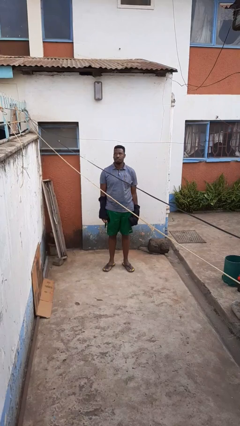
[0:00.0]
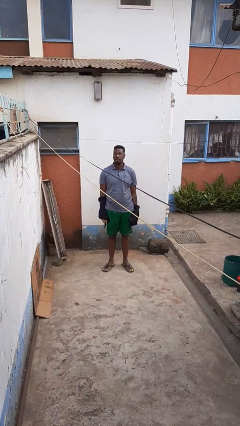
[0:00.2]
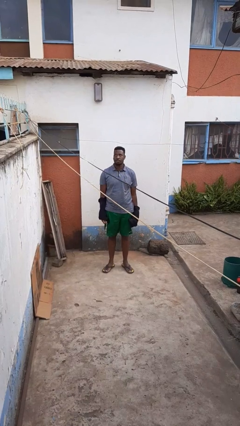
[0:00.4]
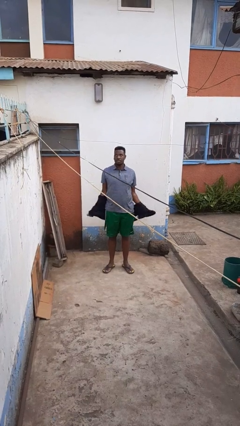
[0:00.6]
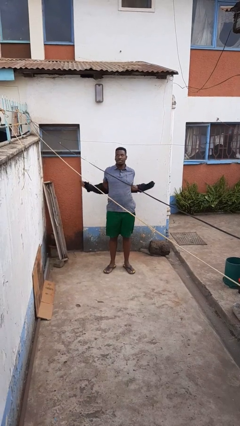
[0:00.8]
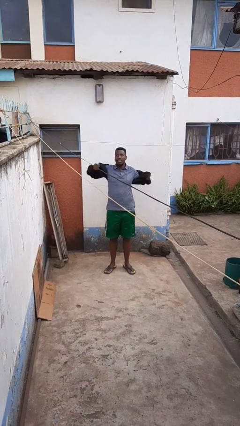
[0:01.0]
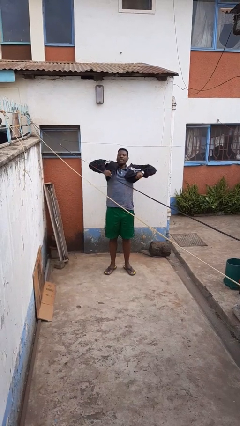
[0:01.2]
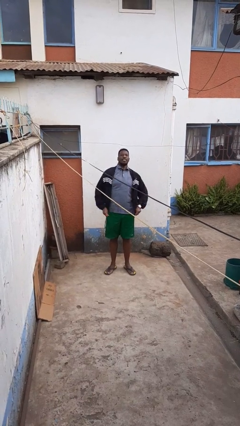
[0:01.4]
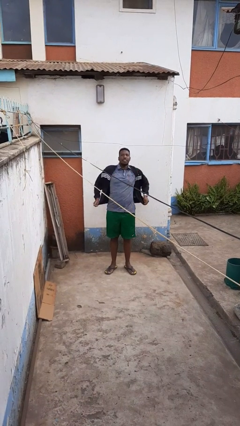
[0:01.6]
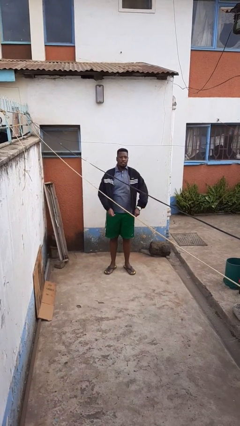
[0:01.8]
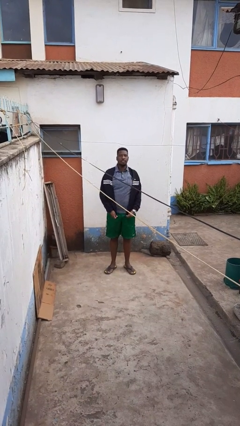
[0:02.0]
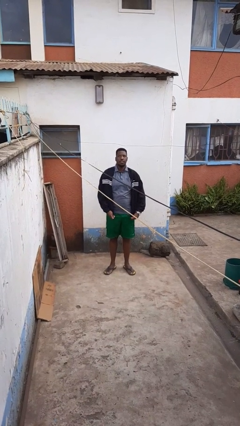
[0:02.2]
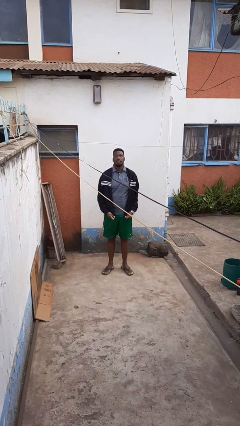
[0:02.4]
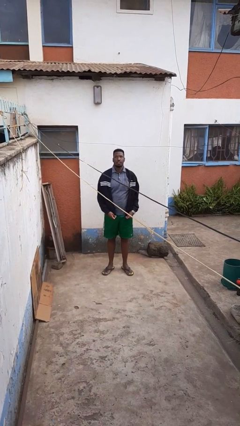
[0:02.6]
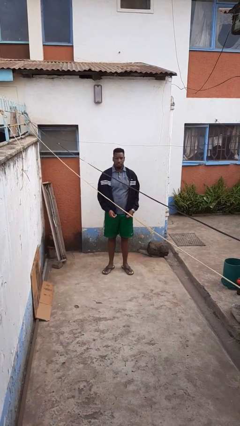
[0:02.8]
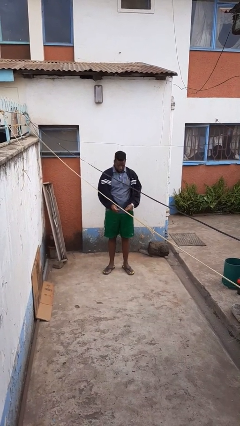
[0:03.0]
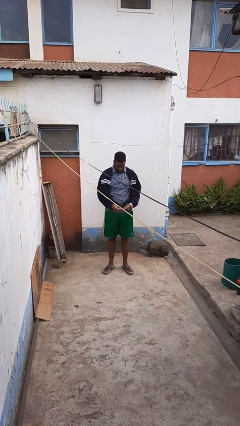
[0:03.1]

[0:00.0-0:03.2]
person puts on jacket

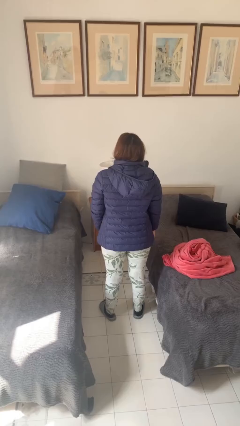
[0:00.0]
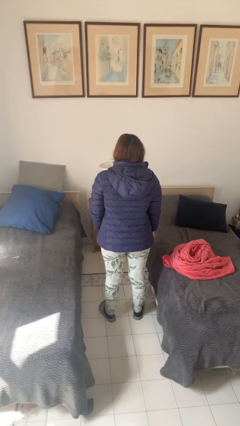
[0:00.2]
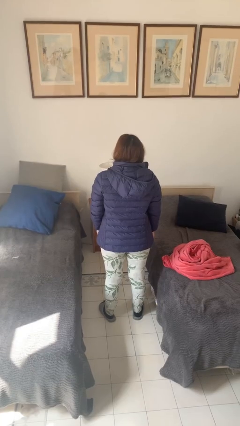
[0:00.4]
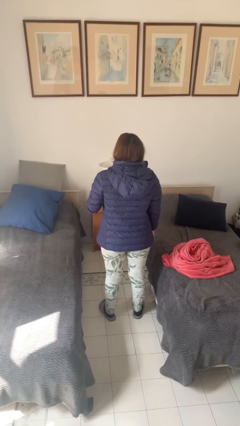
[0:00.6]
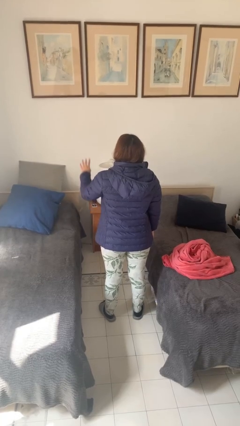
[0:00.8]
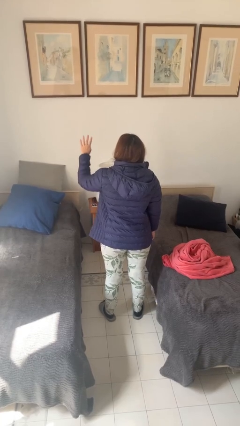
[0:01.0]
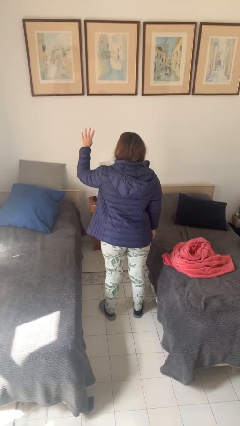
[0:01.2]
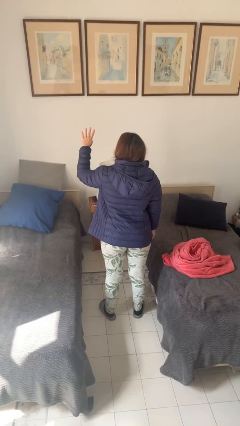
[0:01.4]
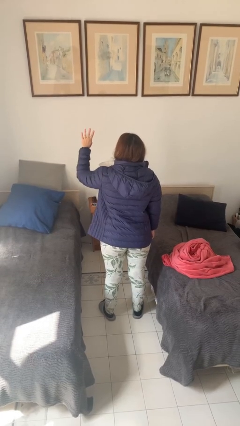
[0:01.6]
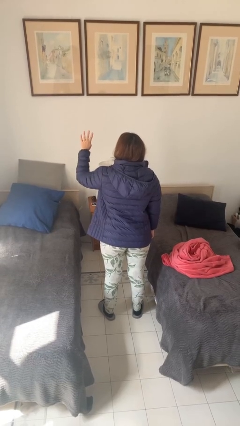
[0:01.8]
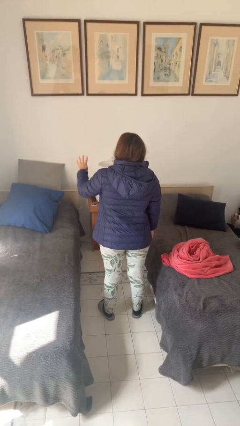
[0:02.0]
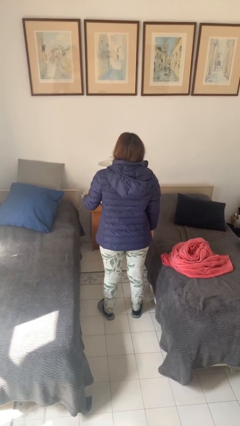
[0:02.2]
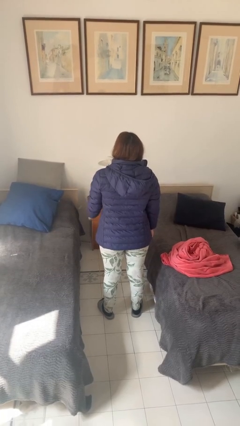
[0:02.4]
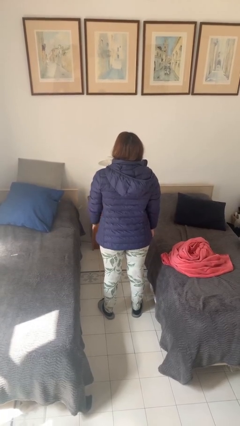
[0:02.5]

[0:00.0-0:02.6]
person gestures number four

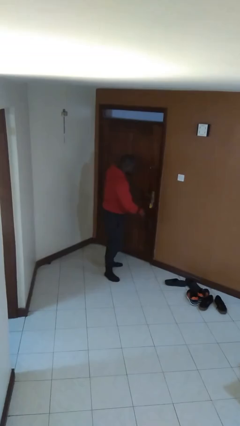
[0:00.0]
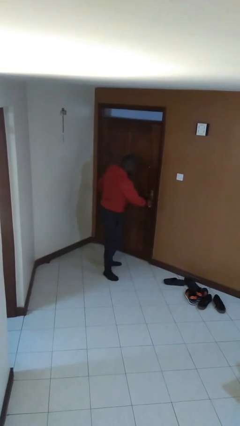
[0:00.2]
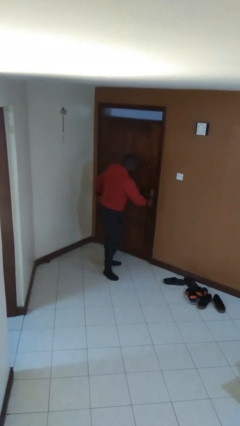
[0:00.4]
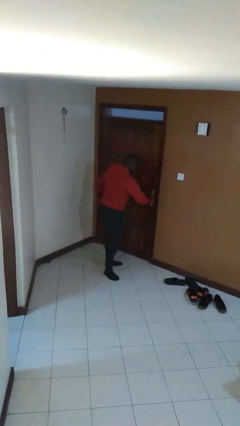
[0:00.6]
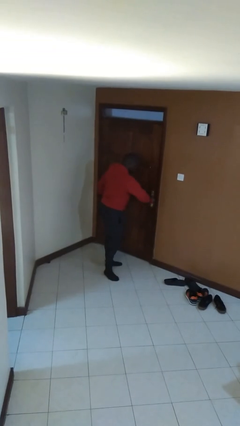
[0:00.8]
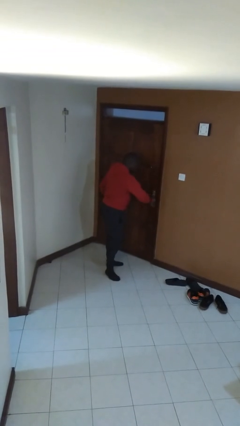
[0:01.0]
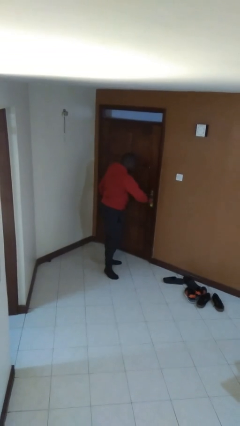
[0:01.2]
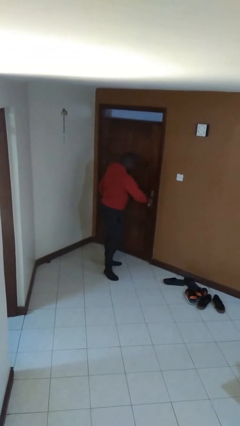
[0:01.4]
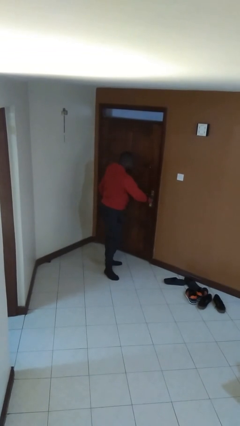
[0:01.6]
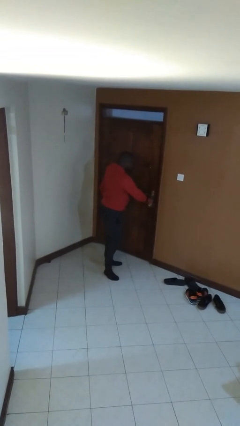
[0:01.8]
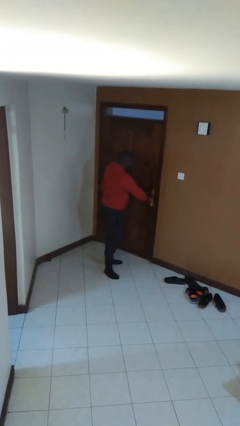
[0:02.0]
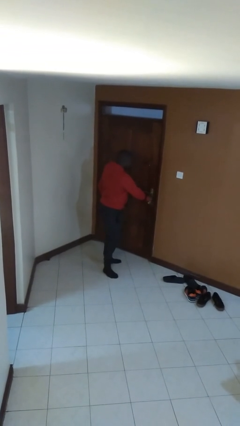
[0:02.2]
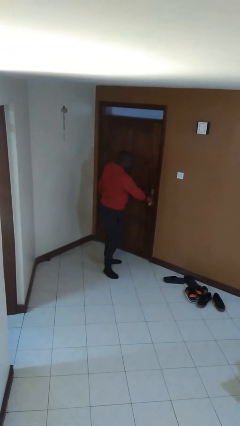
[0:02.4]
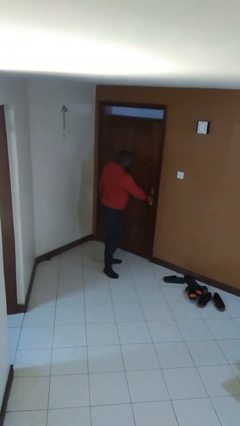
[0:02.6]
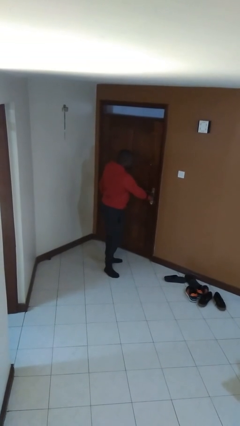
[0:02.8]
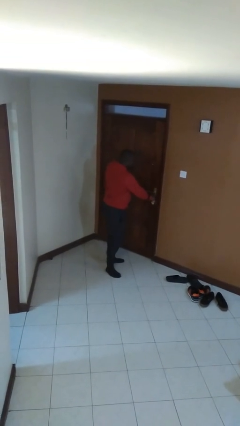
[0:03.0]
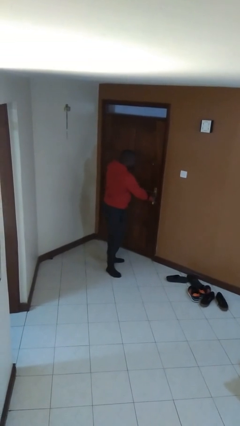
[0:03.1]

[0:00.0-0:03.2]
person unlocks door with keys

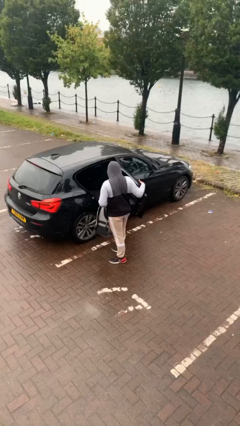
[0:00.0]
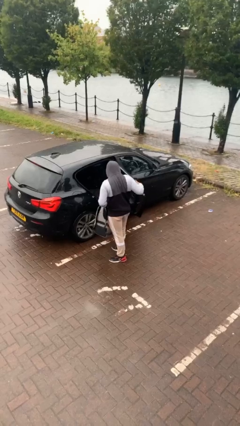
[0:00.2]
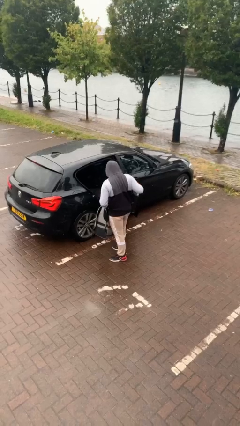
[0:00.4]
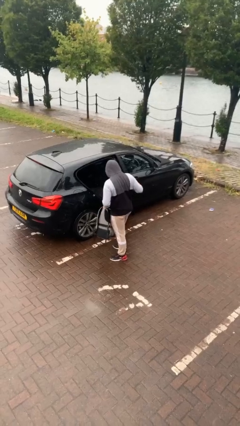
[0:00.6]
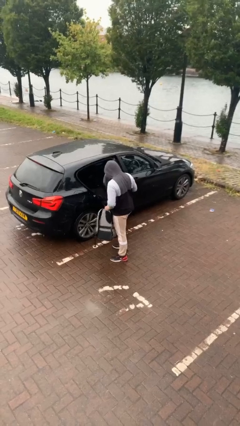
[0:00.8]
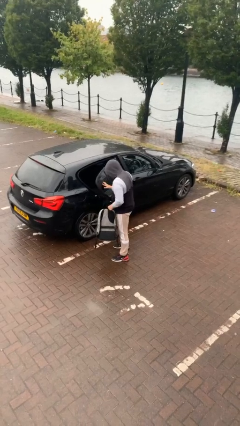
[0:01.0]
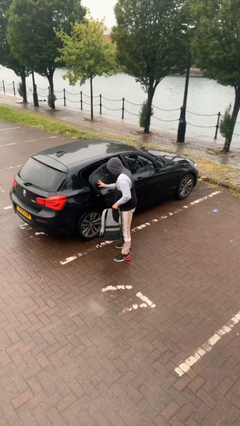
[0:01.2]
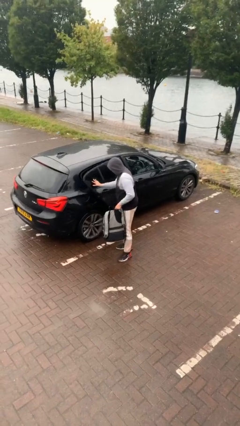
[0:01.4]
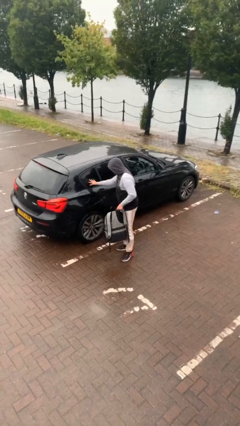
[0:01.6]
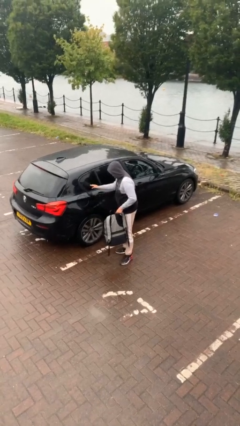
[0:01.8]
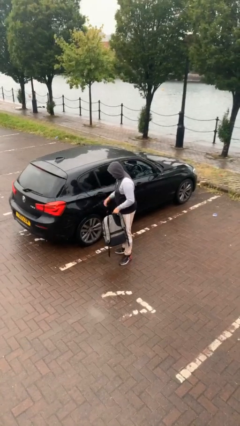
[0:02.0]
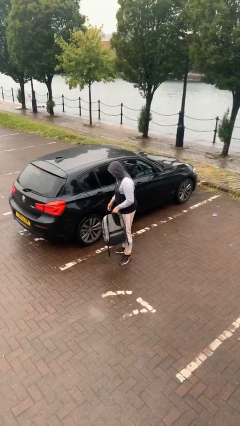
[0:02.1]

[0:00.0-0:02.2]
person closes car door

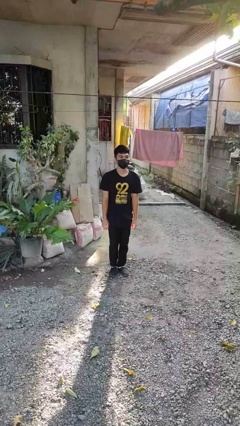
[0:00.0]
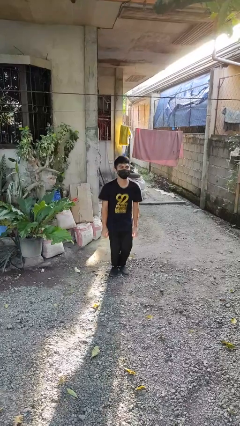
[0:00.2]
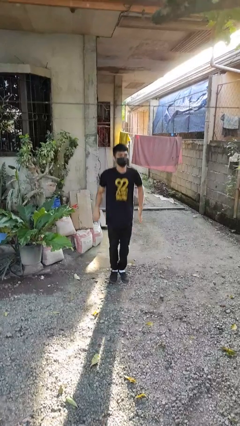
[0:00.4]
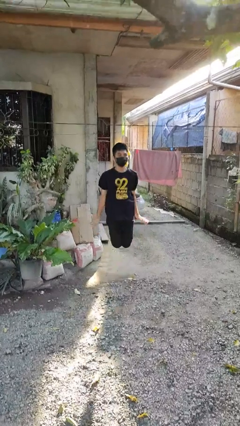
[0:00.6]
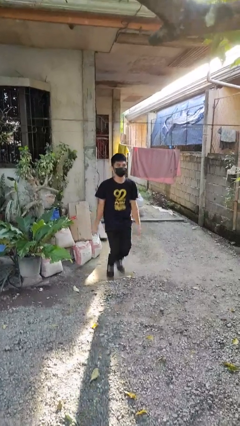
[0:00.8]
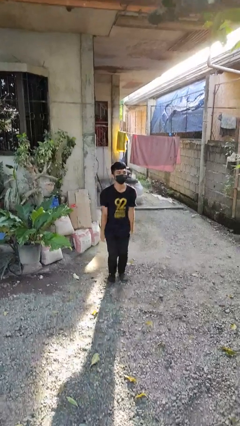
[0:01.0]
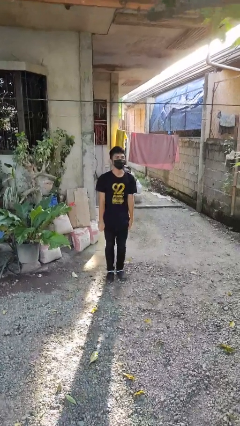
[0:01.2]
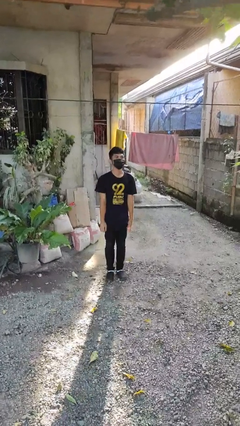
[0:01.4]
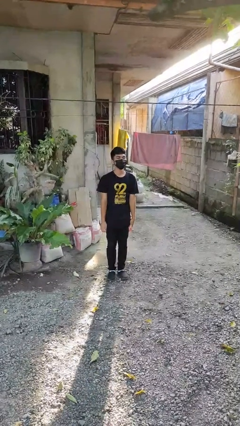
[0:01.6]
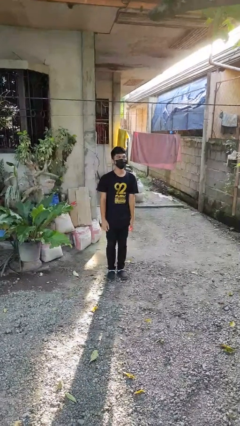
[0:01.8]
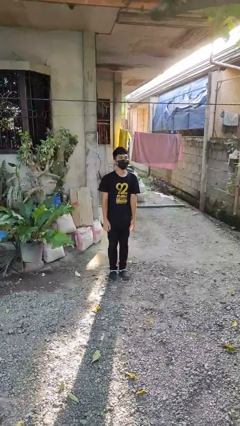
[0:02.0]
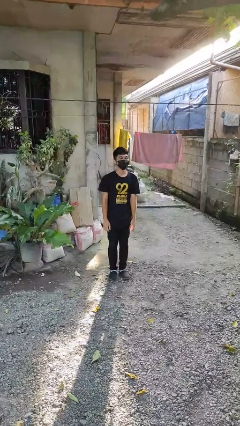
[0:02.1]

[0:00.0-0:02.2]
person jumps

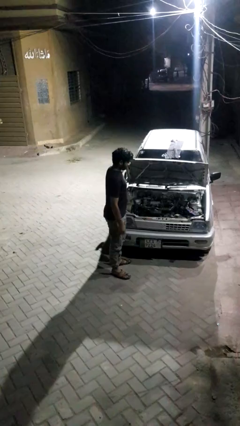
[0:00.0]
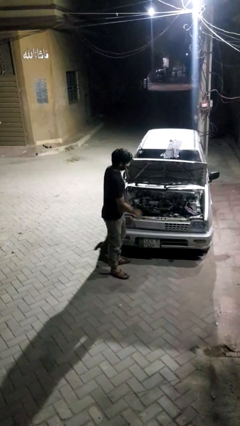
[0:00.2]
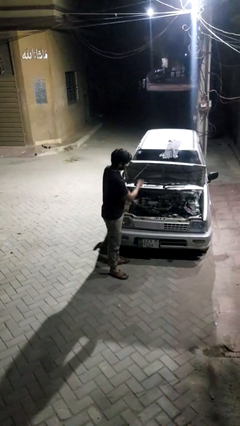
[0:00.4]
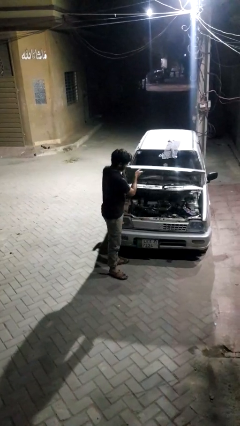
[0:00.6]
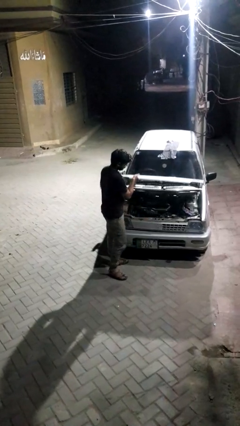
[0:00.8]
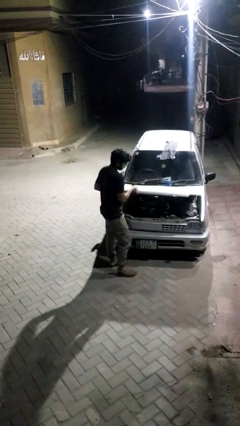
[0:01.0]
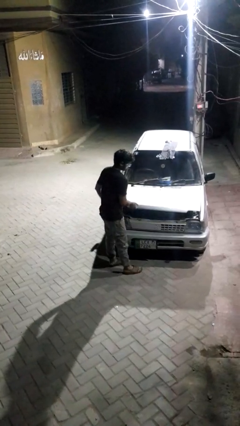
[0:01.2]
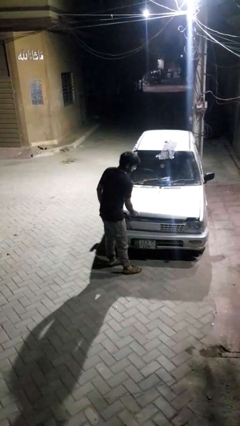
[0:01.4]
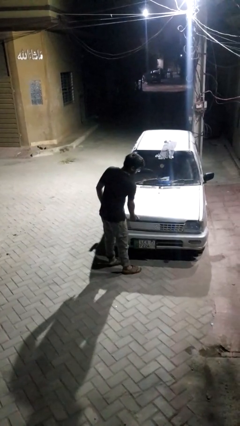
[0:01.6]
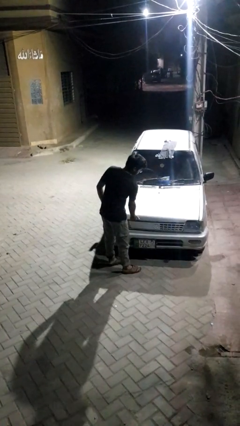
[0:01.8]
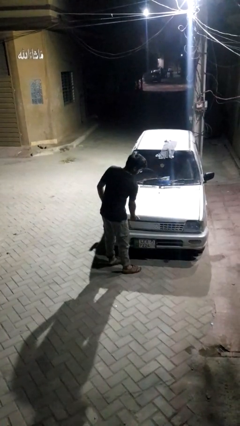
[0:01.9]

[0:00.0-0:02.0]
person closes car hood

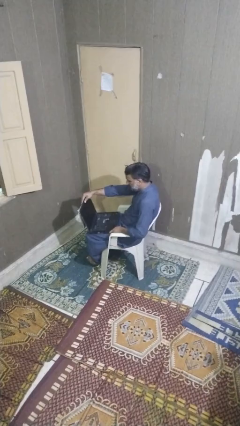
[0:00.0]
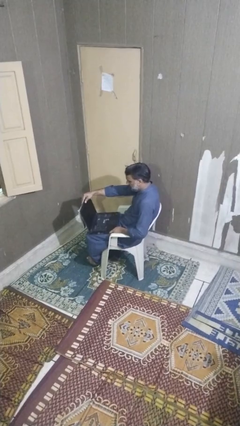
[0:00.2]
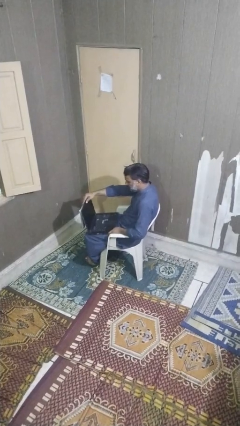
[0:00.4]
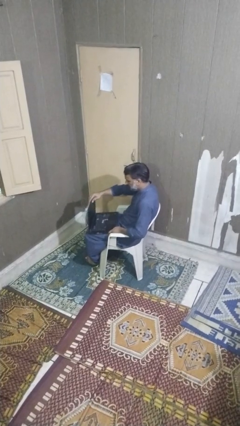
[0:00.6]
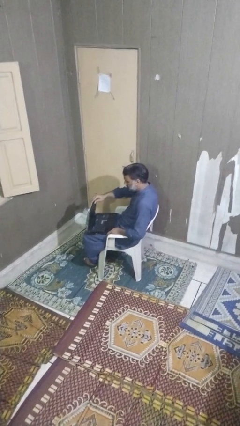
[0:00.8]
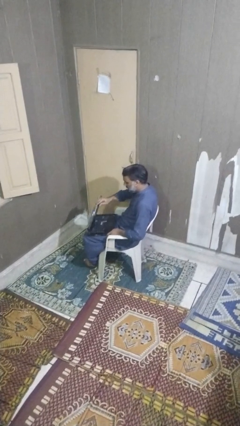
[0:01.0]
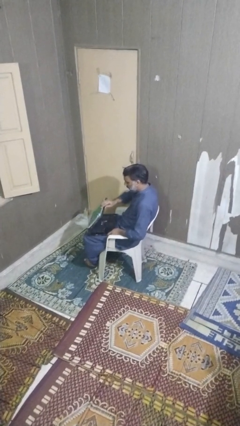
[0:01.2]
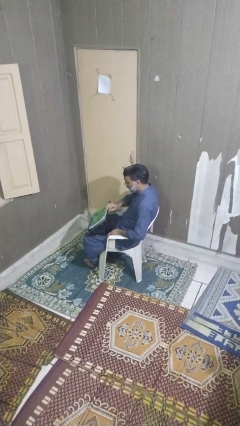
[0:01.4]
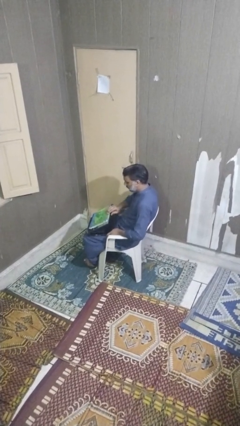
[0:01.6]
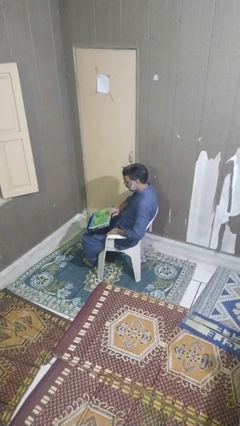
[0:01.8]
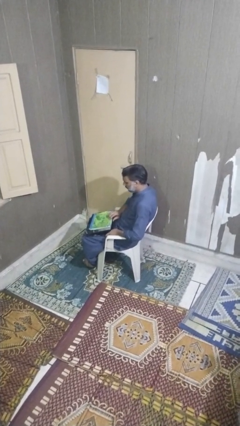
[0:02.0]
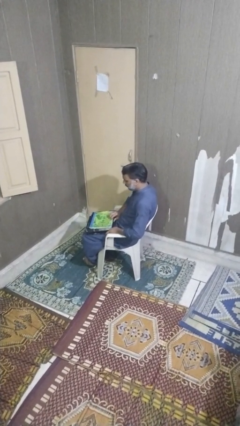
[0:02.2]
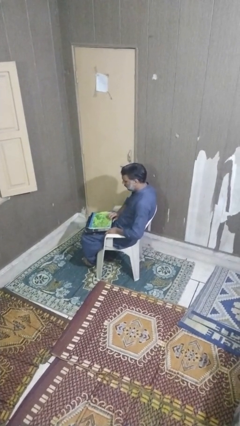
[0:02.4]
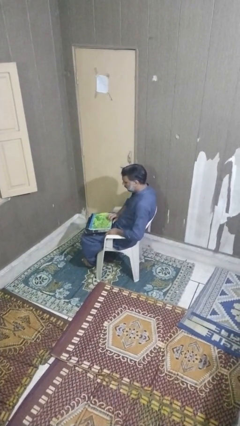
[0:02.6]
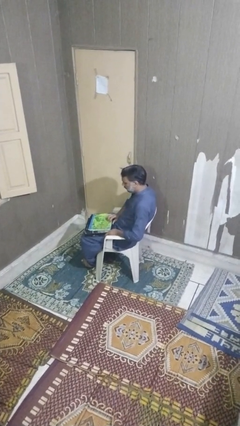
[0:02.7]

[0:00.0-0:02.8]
person closes laptop
